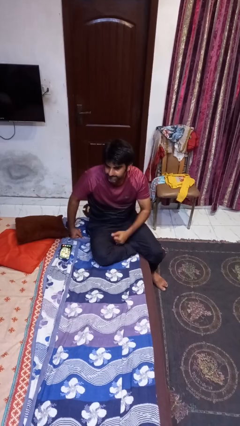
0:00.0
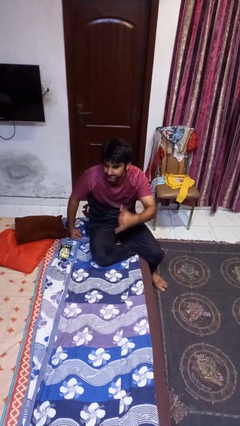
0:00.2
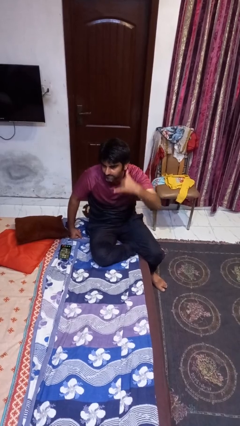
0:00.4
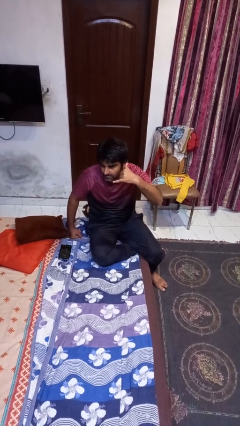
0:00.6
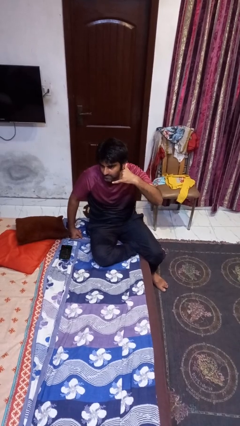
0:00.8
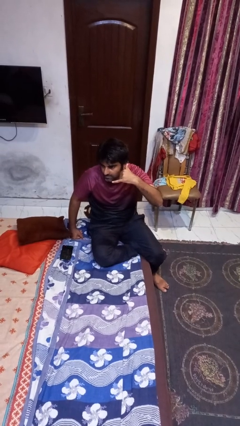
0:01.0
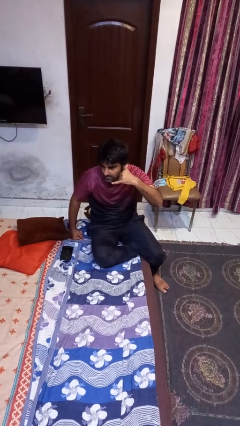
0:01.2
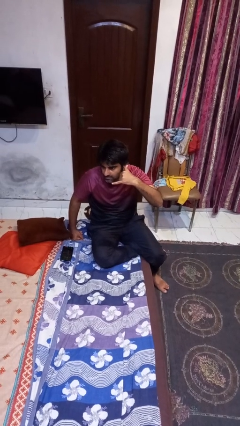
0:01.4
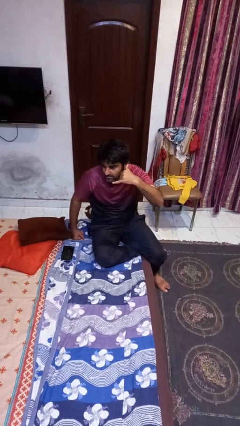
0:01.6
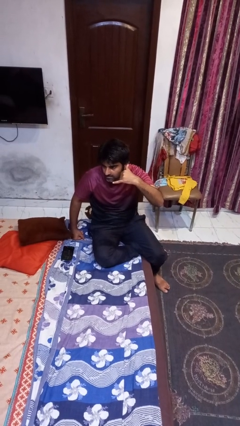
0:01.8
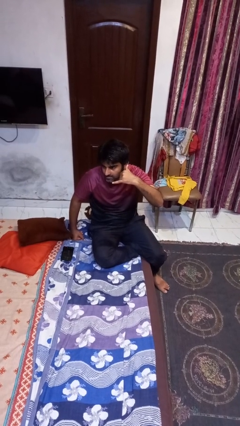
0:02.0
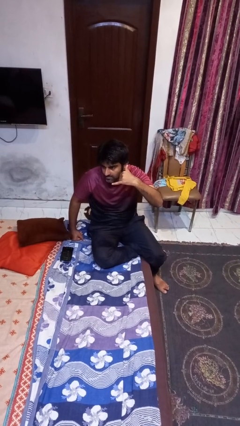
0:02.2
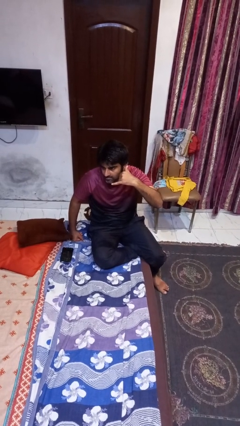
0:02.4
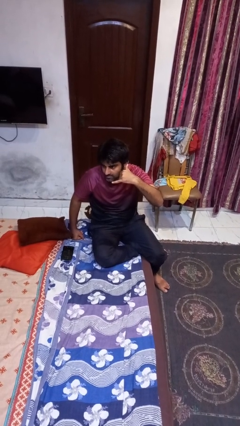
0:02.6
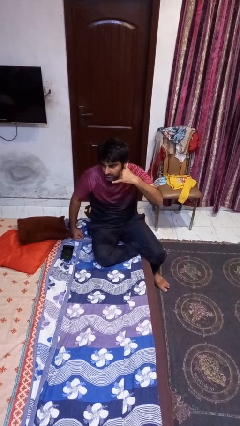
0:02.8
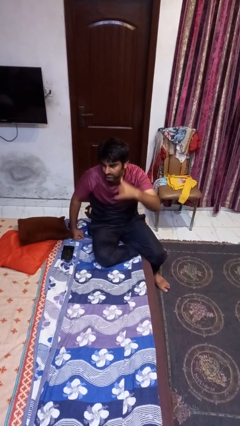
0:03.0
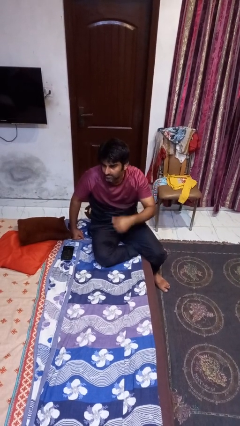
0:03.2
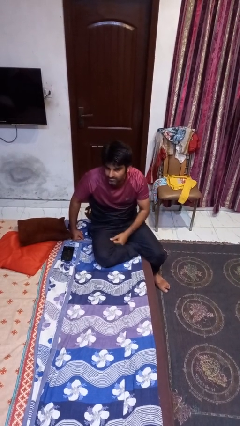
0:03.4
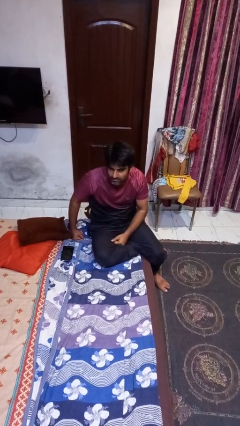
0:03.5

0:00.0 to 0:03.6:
person gestures call me

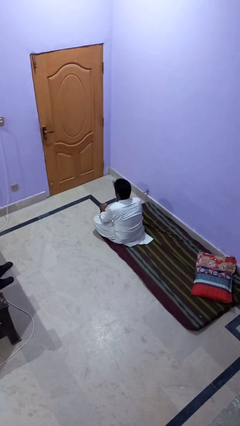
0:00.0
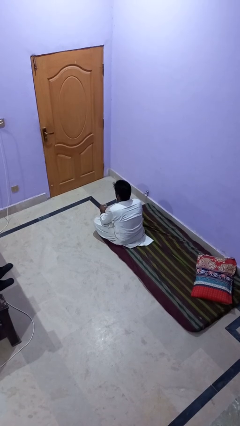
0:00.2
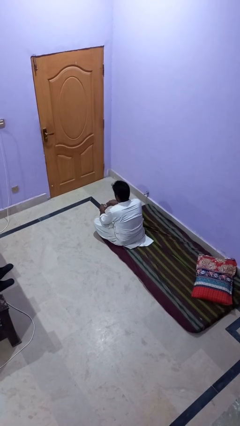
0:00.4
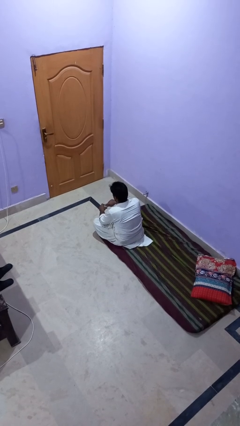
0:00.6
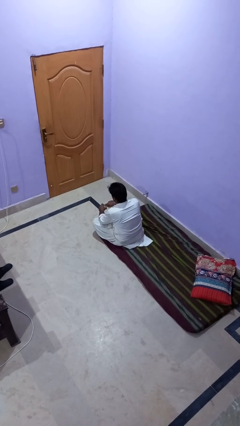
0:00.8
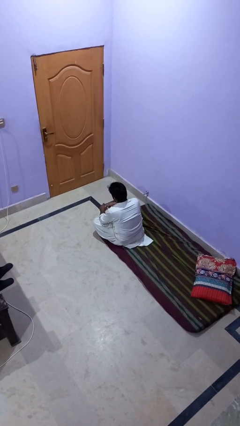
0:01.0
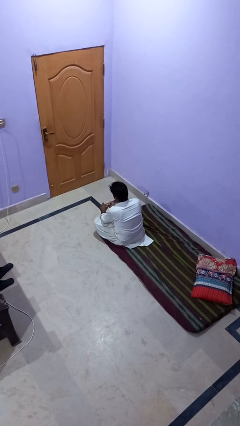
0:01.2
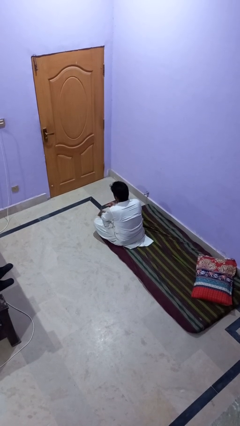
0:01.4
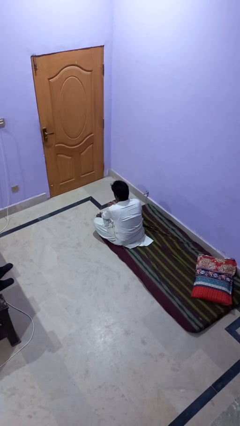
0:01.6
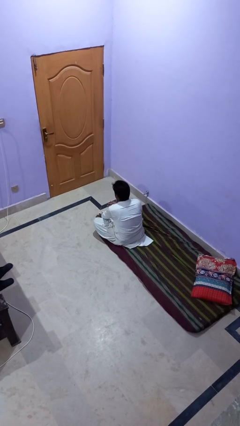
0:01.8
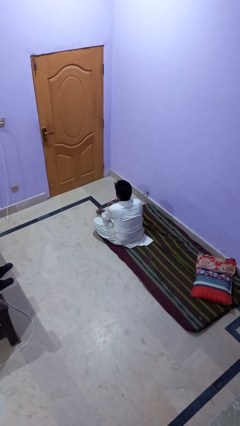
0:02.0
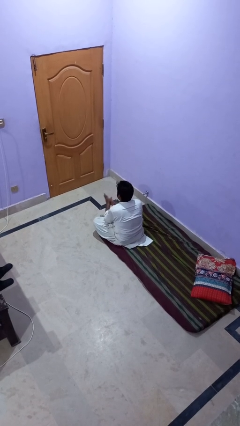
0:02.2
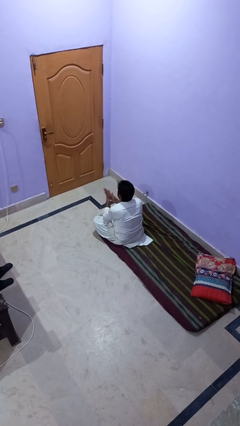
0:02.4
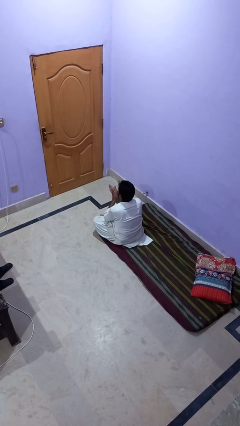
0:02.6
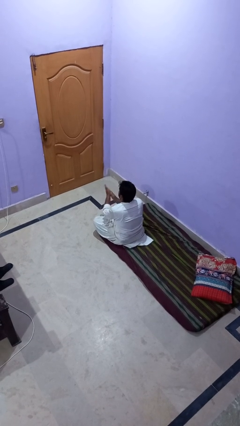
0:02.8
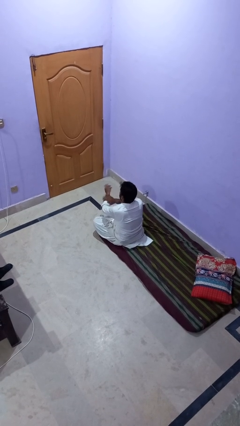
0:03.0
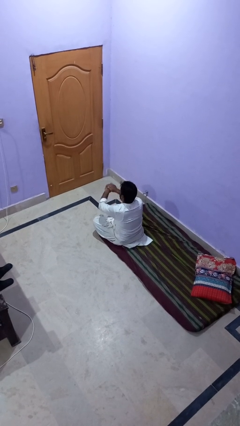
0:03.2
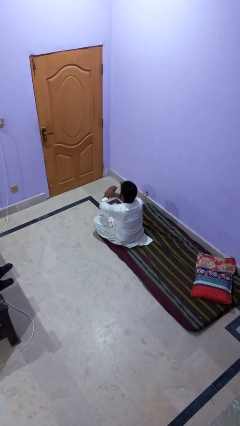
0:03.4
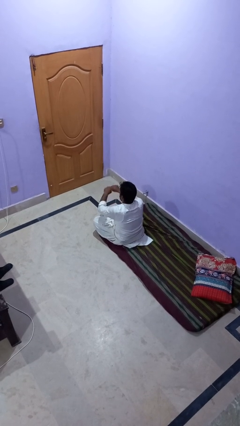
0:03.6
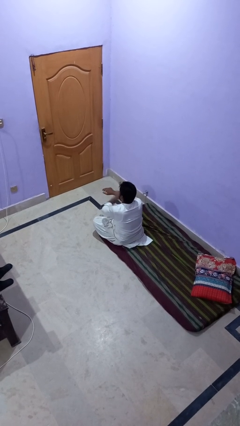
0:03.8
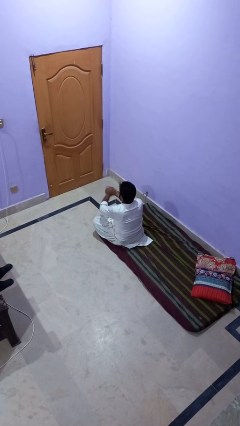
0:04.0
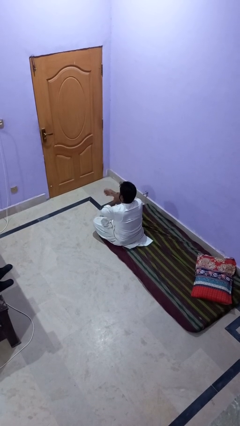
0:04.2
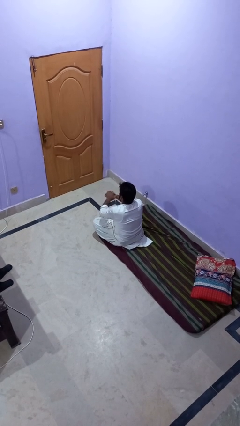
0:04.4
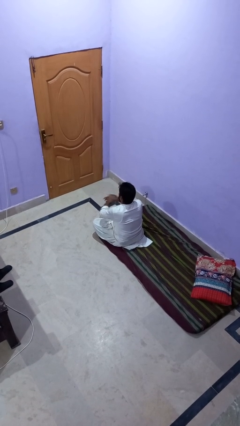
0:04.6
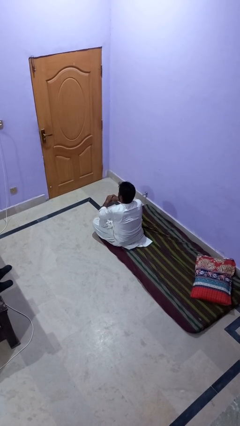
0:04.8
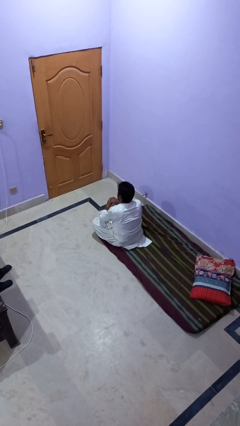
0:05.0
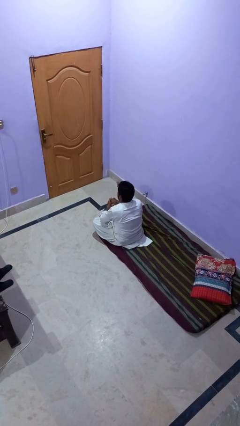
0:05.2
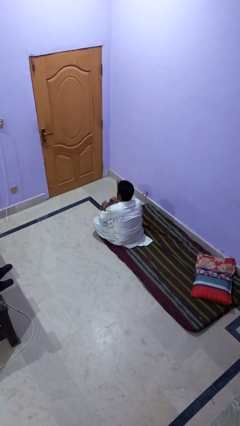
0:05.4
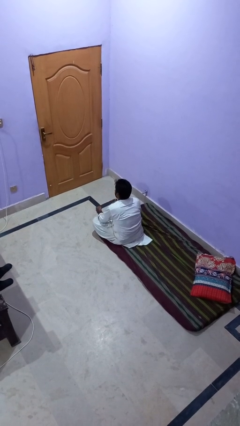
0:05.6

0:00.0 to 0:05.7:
person applies sunscreen

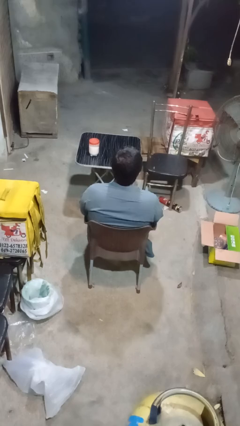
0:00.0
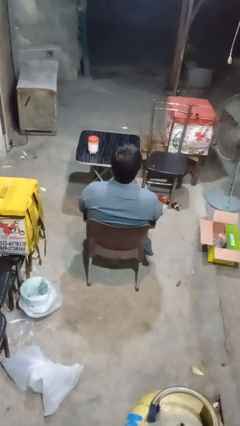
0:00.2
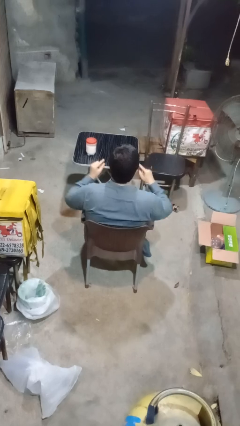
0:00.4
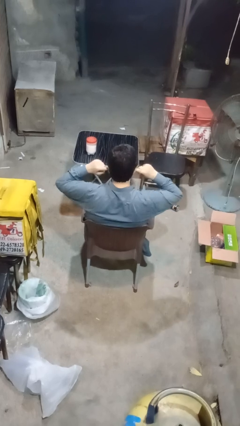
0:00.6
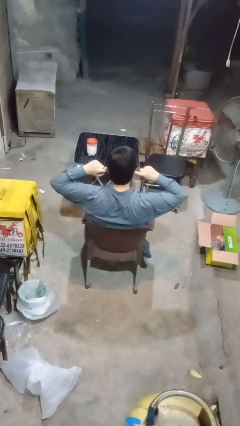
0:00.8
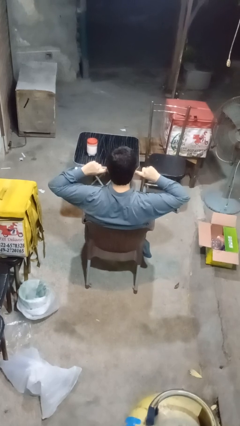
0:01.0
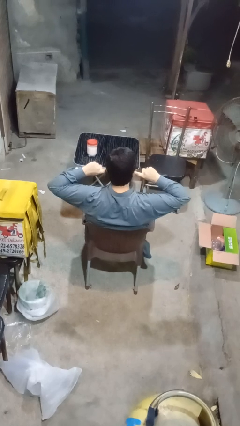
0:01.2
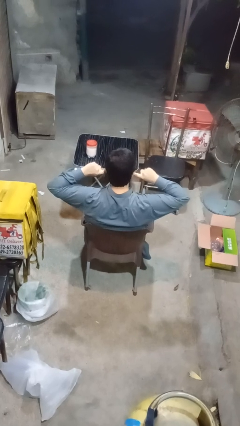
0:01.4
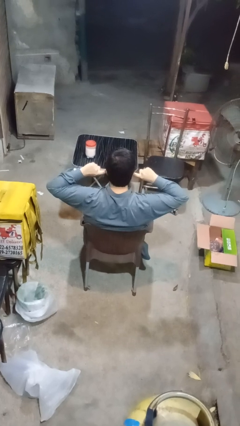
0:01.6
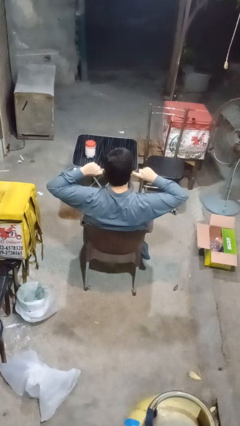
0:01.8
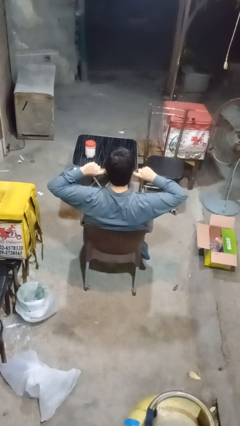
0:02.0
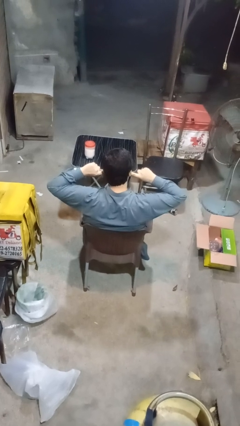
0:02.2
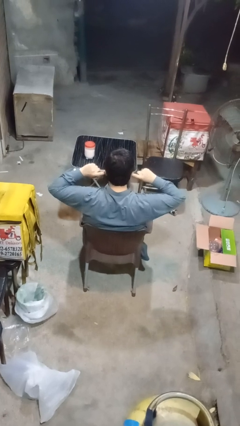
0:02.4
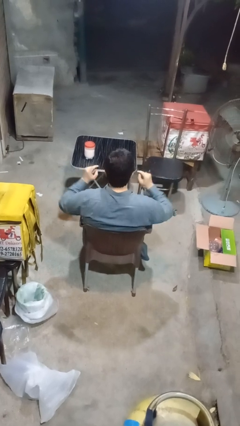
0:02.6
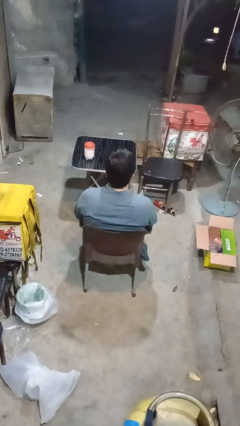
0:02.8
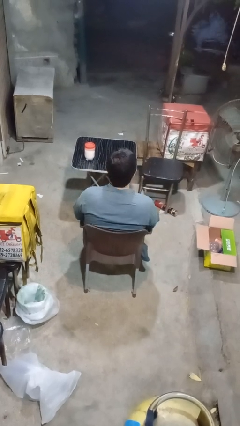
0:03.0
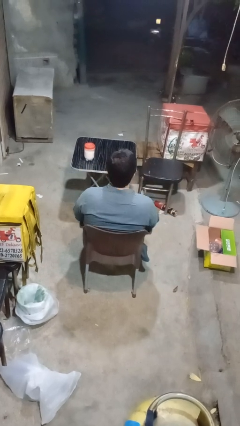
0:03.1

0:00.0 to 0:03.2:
person puts fingers in ear

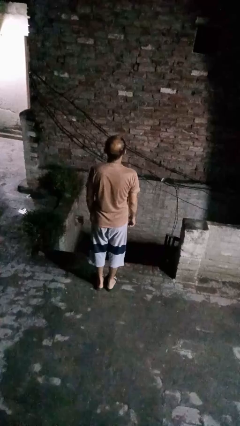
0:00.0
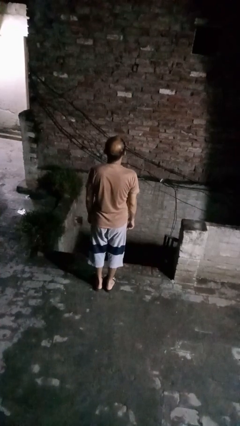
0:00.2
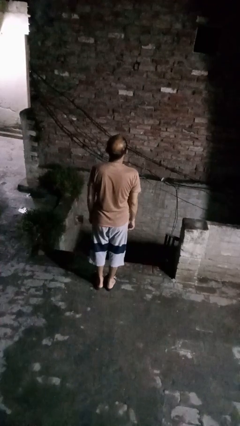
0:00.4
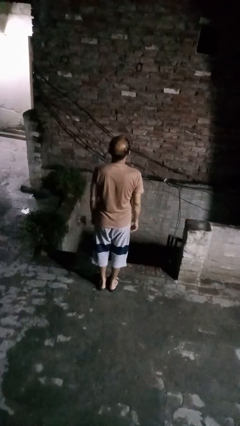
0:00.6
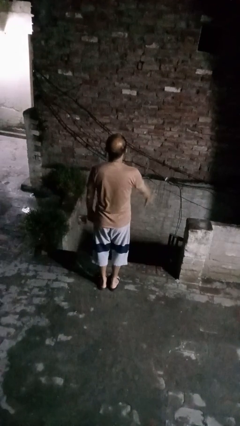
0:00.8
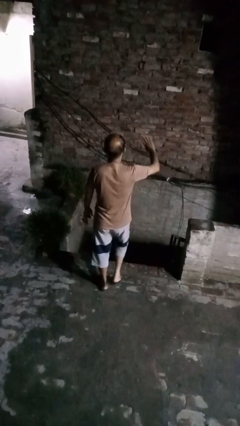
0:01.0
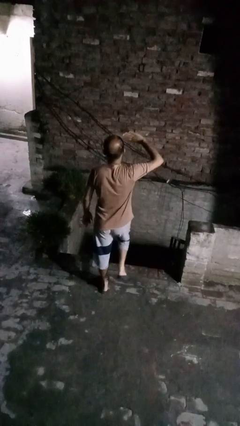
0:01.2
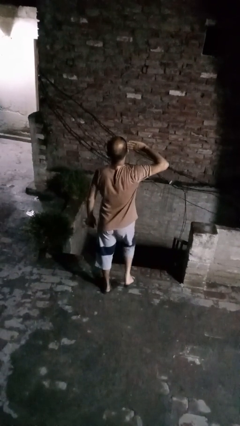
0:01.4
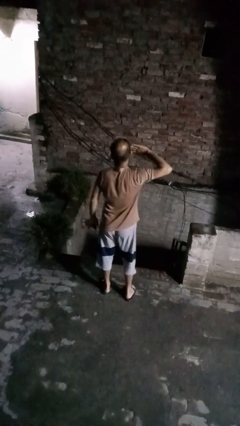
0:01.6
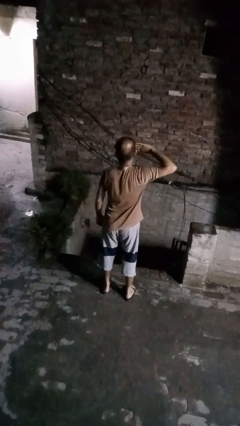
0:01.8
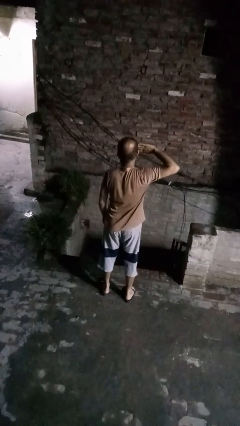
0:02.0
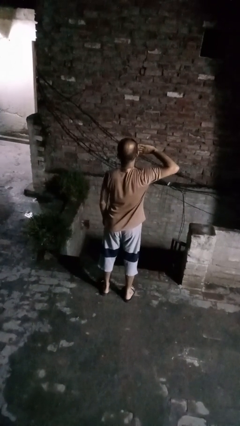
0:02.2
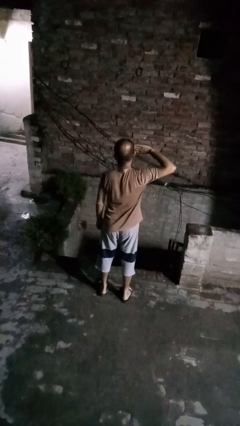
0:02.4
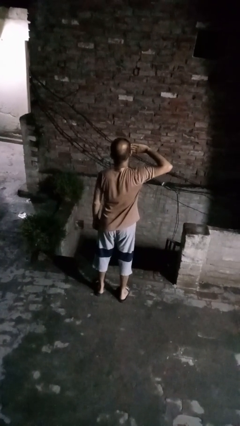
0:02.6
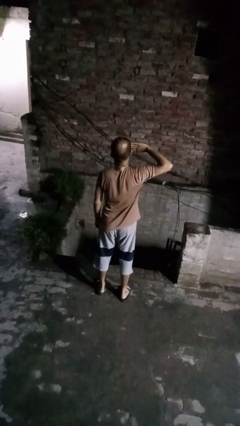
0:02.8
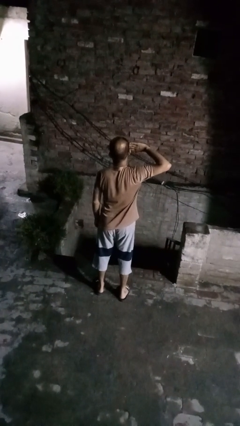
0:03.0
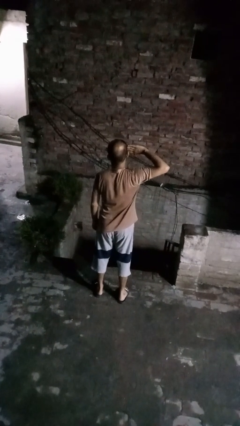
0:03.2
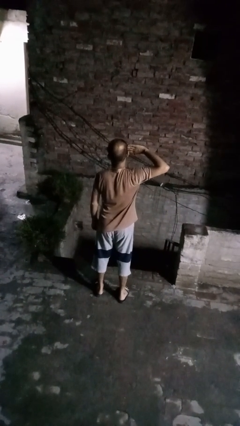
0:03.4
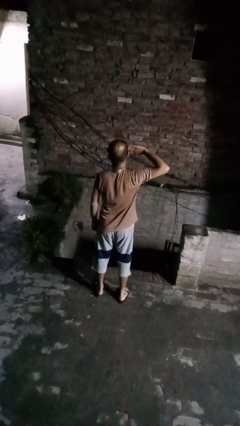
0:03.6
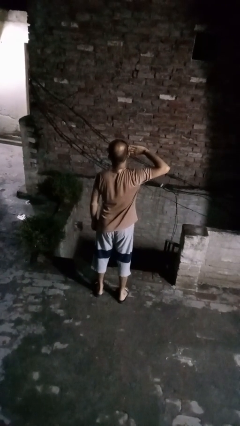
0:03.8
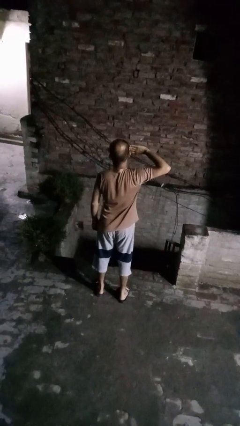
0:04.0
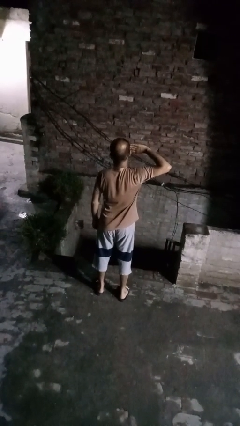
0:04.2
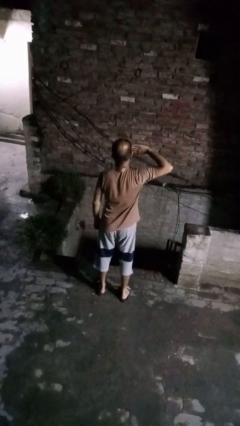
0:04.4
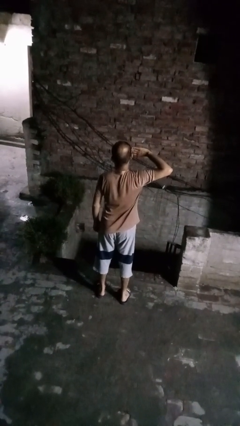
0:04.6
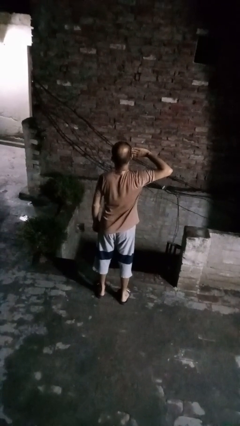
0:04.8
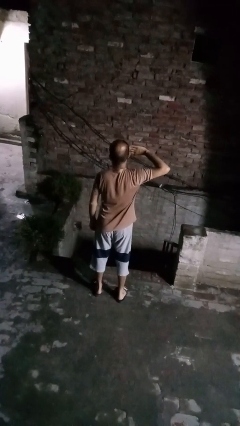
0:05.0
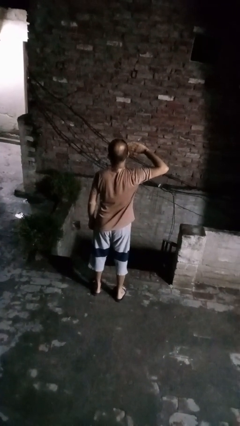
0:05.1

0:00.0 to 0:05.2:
person salutes

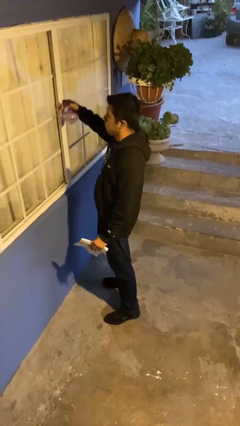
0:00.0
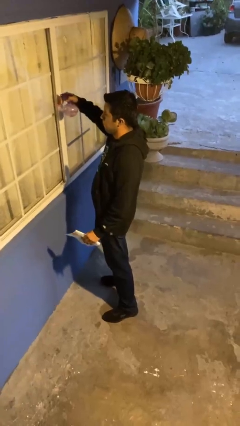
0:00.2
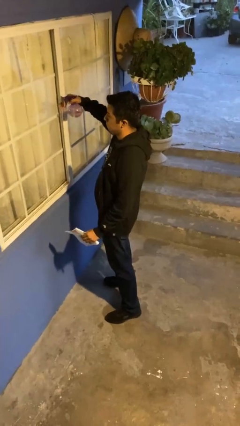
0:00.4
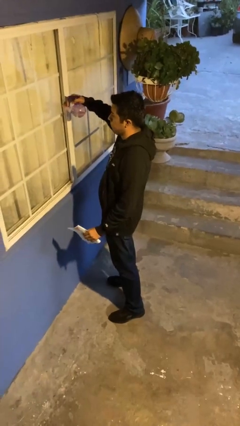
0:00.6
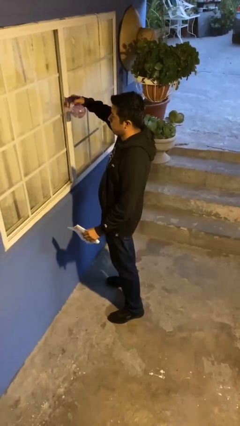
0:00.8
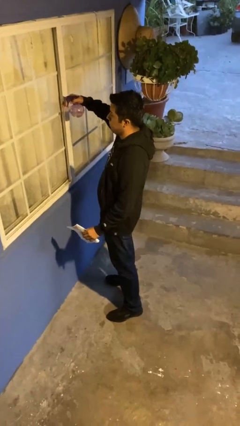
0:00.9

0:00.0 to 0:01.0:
person sprays from bottle
